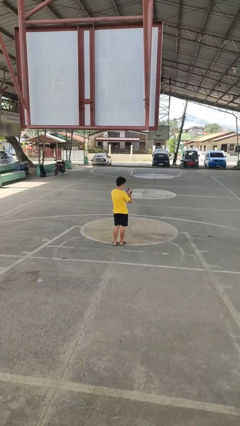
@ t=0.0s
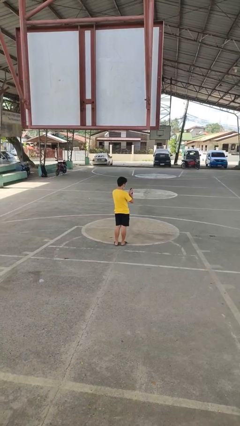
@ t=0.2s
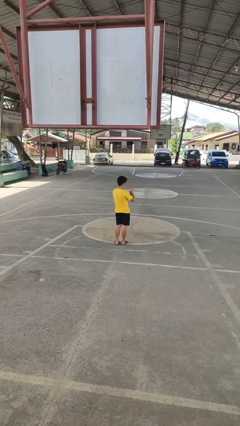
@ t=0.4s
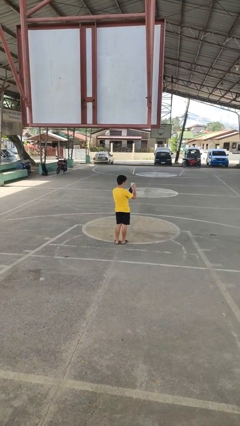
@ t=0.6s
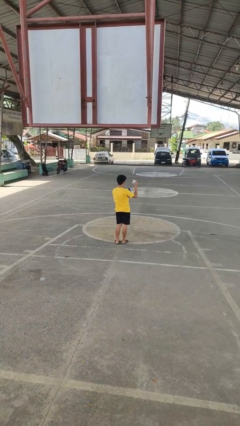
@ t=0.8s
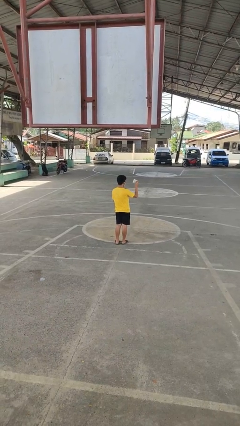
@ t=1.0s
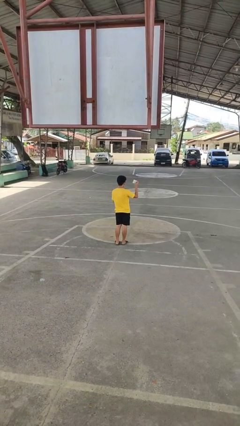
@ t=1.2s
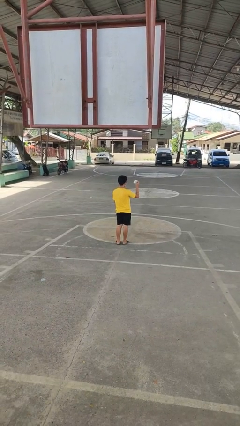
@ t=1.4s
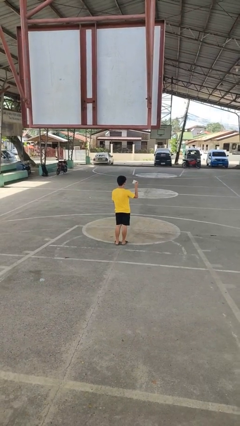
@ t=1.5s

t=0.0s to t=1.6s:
person takes object from purse

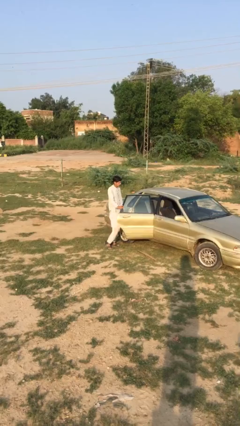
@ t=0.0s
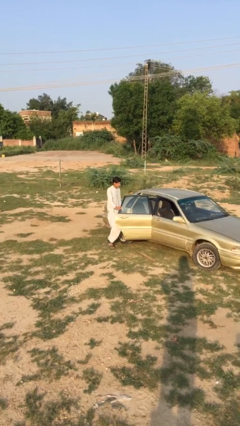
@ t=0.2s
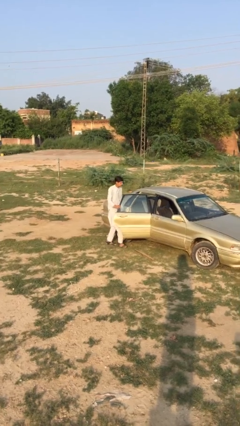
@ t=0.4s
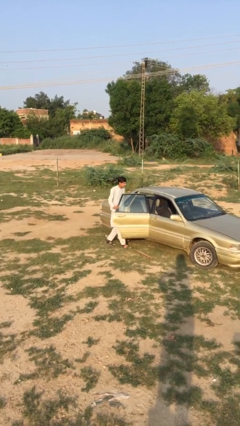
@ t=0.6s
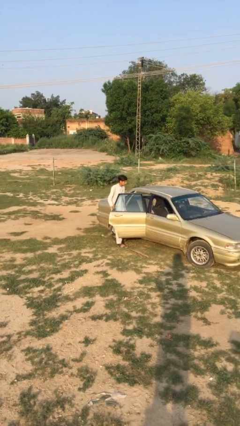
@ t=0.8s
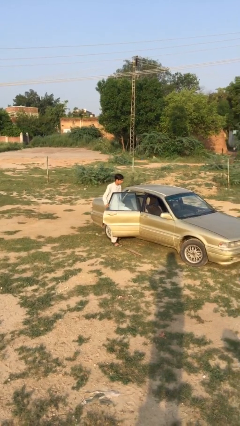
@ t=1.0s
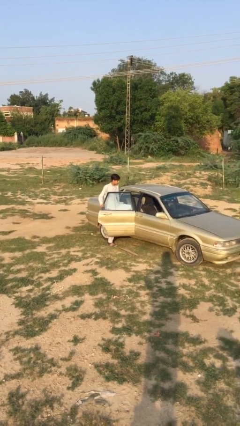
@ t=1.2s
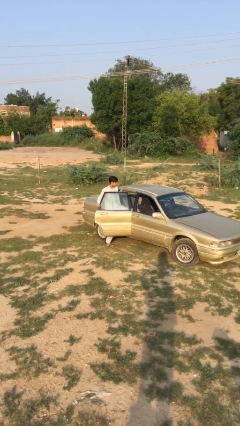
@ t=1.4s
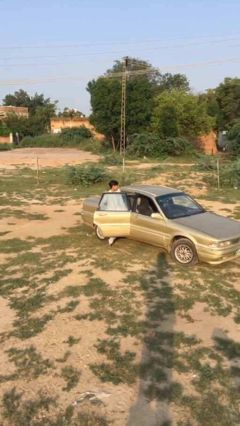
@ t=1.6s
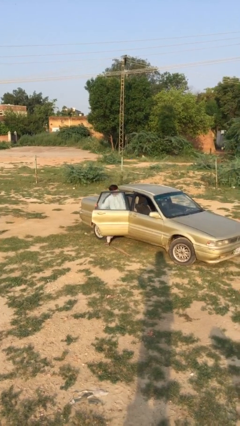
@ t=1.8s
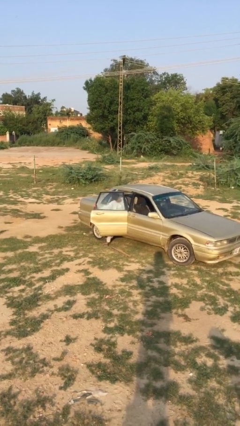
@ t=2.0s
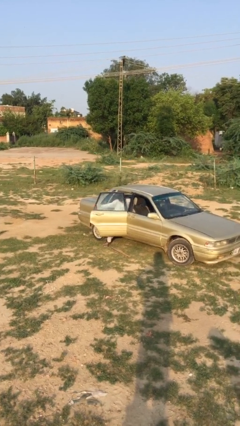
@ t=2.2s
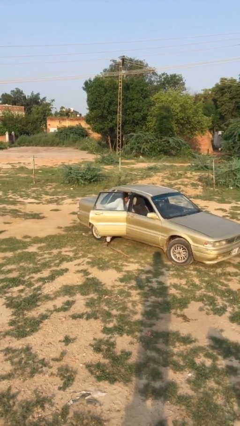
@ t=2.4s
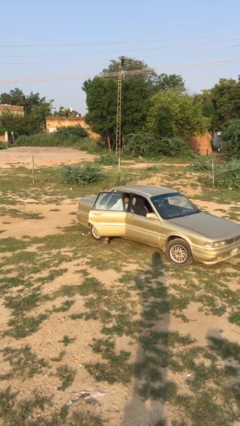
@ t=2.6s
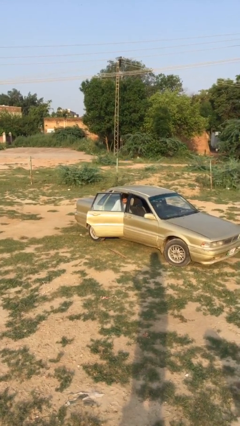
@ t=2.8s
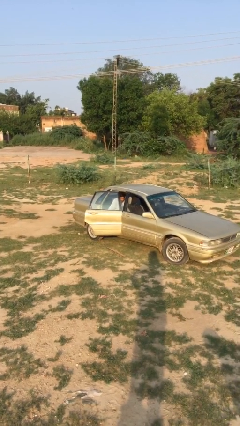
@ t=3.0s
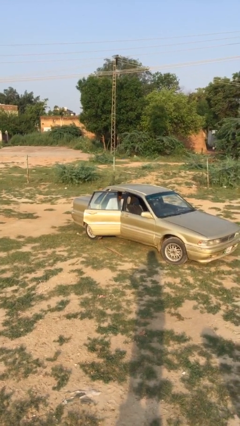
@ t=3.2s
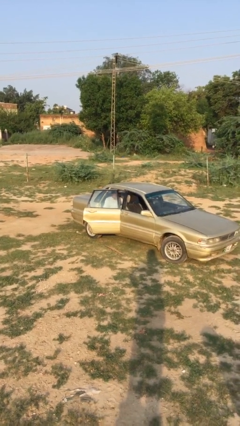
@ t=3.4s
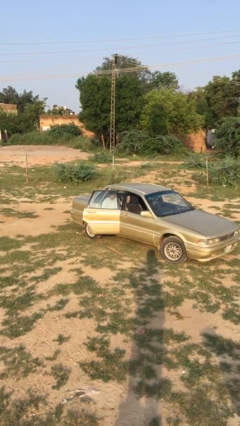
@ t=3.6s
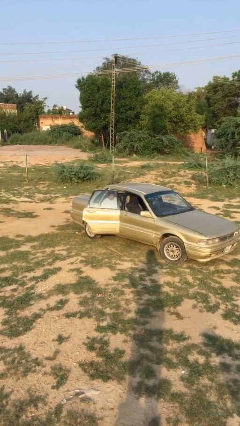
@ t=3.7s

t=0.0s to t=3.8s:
person enters car

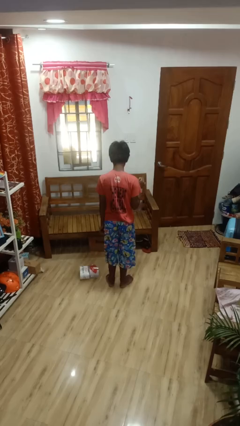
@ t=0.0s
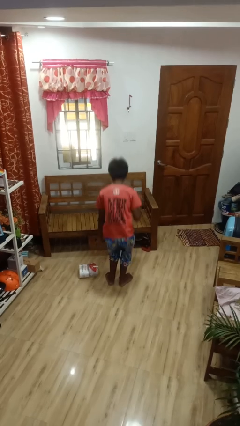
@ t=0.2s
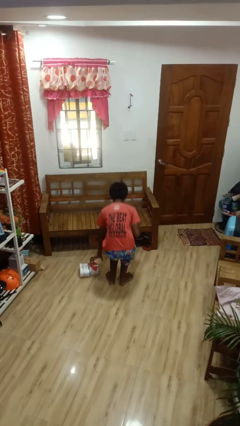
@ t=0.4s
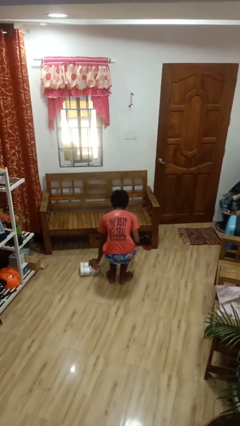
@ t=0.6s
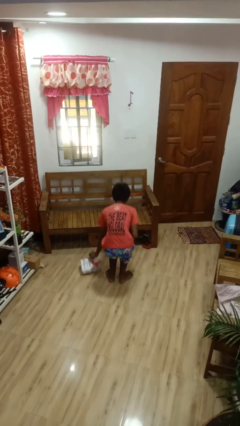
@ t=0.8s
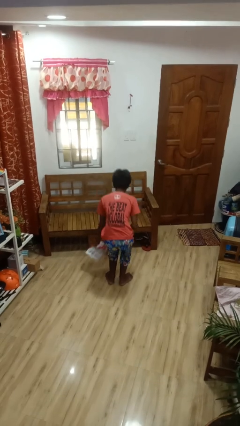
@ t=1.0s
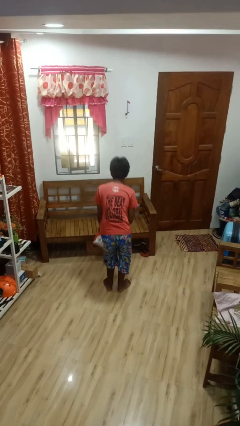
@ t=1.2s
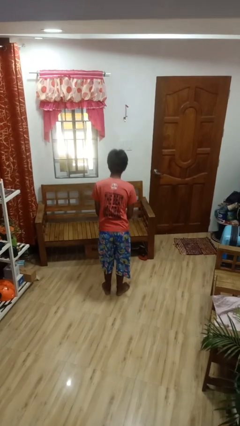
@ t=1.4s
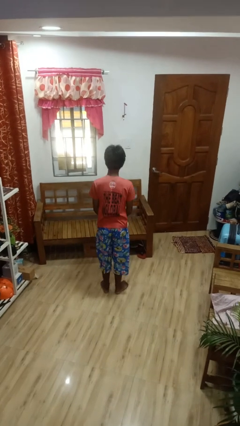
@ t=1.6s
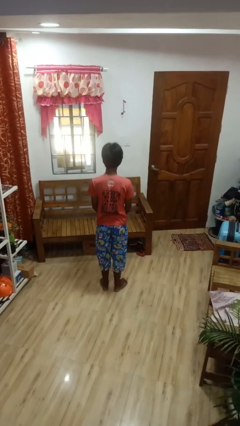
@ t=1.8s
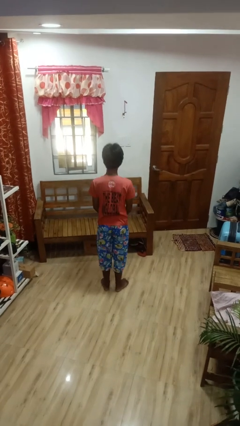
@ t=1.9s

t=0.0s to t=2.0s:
person picks up object from floor

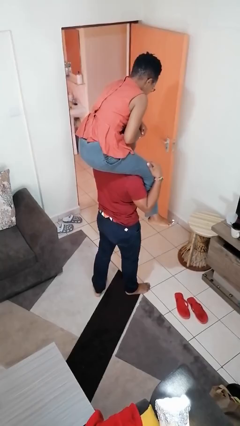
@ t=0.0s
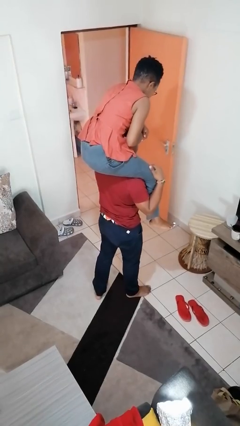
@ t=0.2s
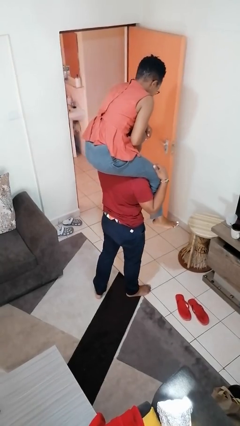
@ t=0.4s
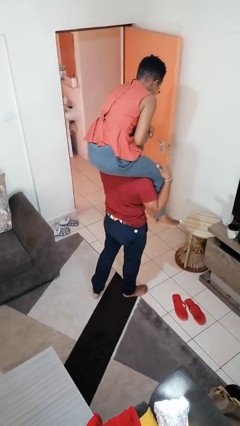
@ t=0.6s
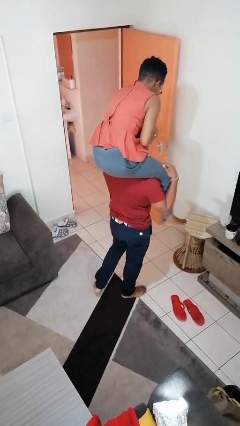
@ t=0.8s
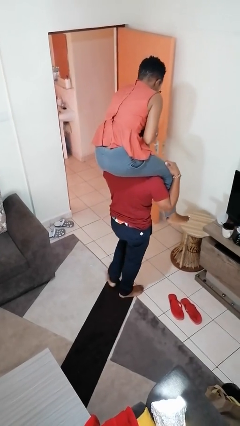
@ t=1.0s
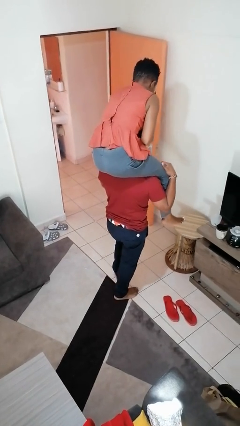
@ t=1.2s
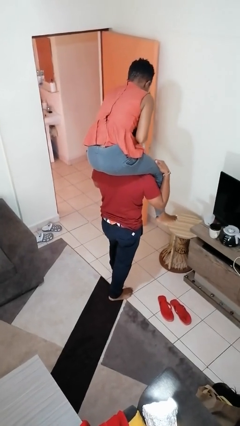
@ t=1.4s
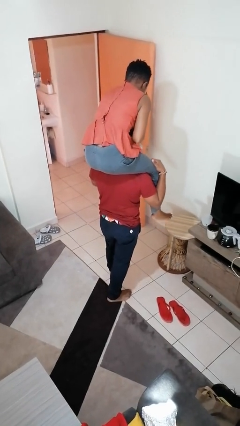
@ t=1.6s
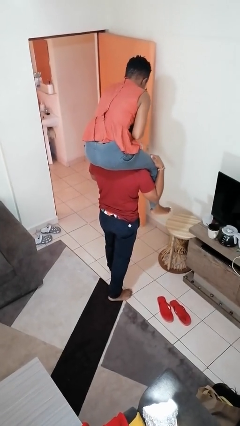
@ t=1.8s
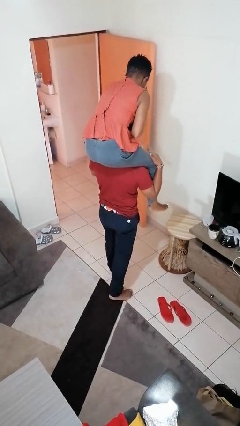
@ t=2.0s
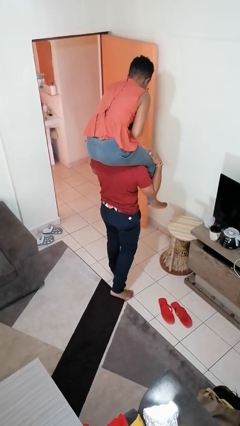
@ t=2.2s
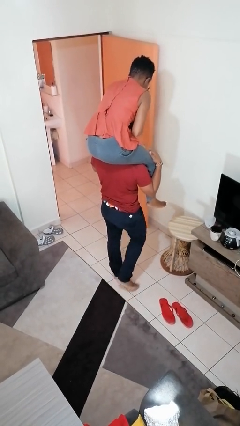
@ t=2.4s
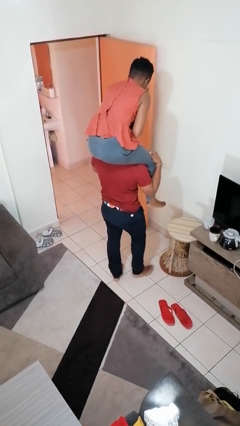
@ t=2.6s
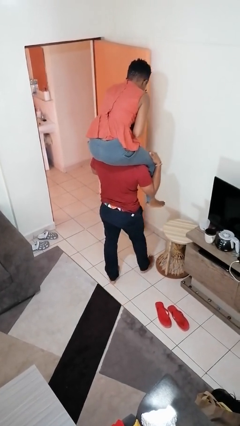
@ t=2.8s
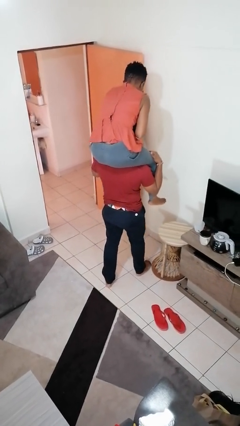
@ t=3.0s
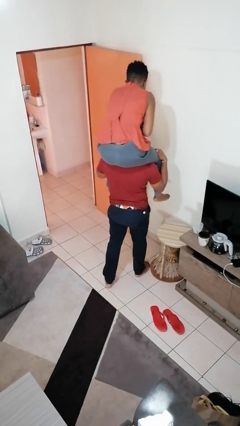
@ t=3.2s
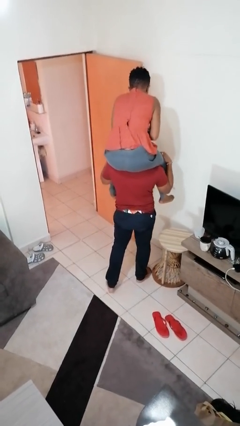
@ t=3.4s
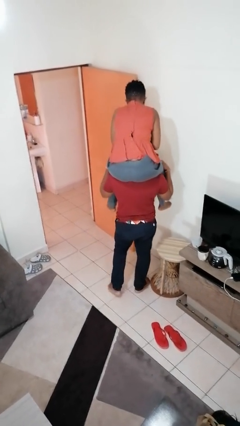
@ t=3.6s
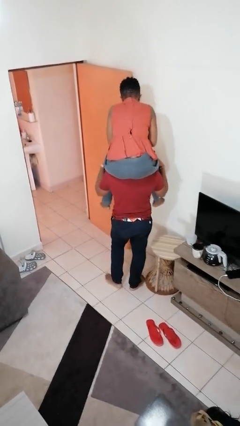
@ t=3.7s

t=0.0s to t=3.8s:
person carries person on shoulders

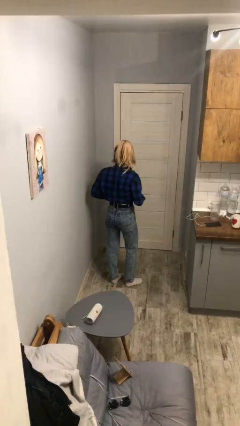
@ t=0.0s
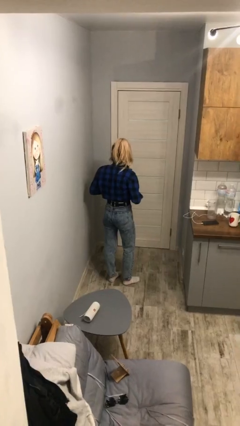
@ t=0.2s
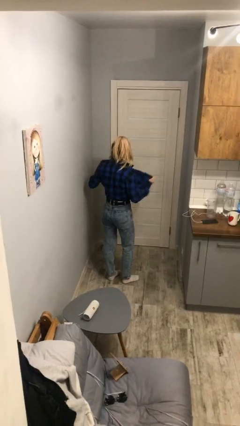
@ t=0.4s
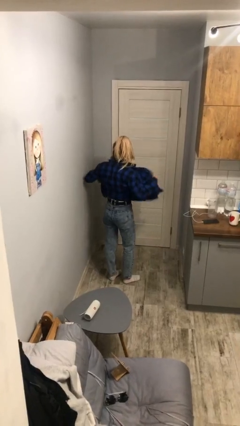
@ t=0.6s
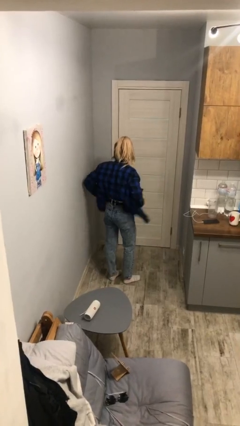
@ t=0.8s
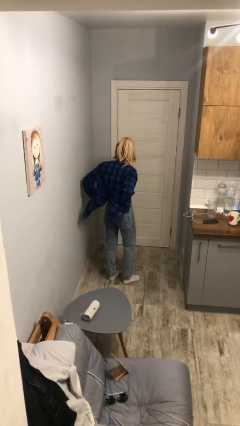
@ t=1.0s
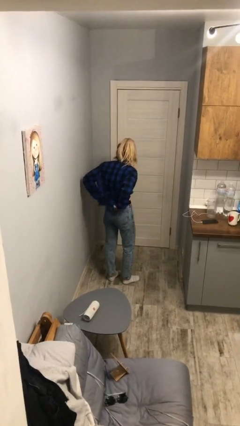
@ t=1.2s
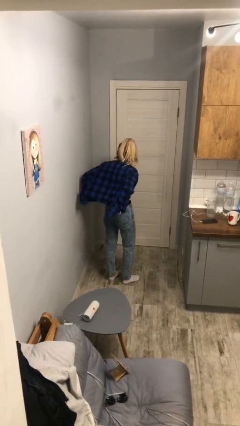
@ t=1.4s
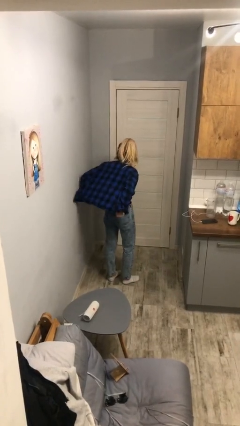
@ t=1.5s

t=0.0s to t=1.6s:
person untucks shirt

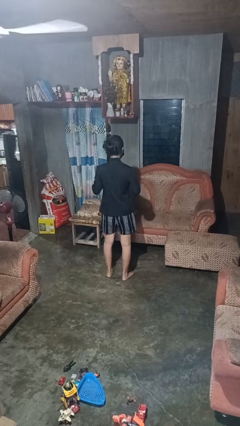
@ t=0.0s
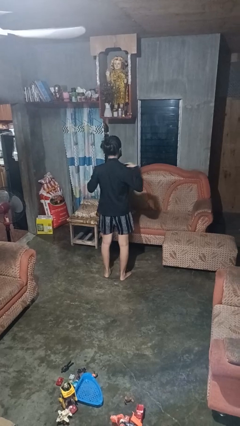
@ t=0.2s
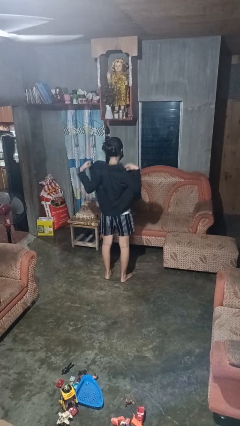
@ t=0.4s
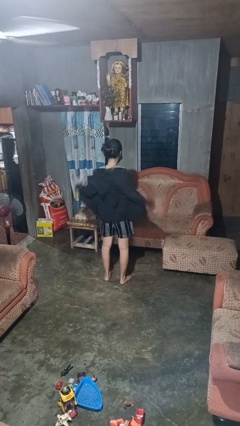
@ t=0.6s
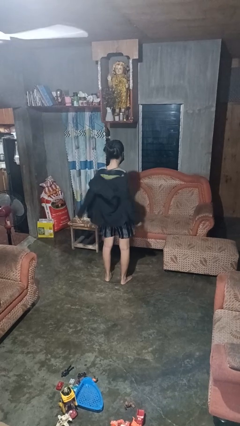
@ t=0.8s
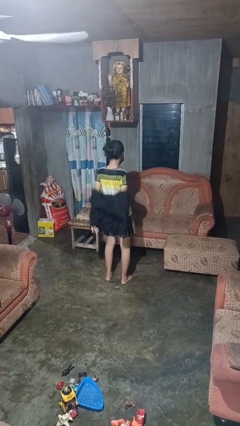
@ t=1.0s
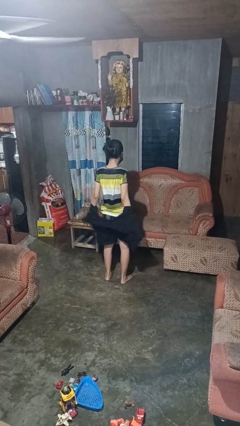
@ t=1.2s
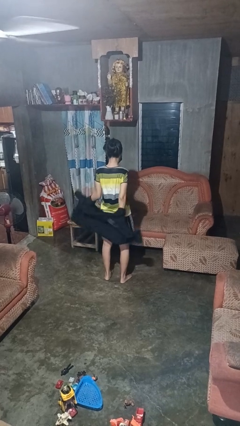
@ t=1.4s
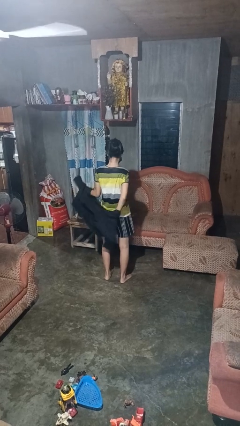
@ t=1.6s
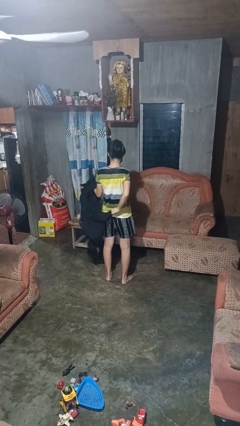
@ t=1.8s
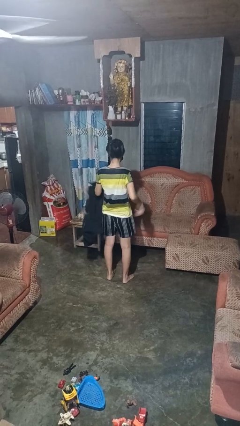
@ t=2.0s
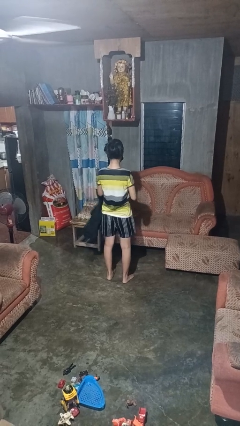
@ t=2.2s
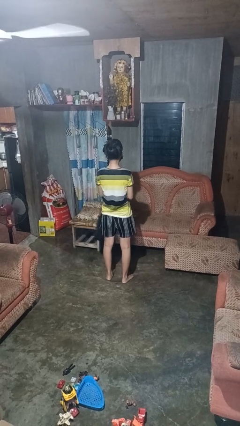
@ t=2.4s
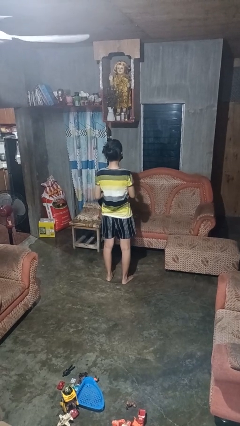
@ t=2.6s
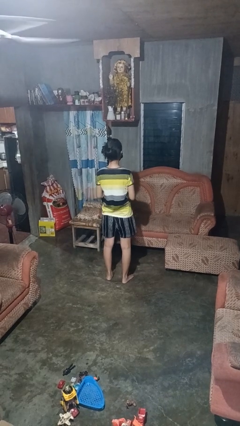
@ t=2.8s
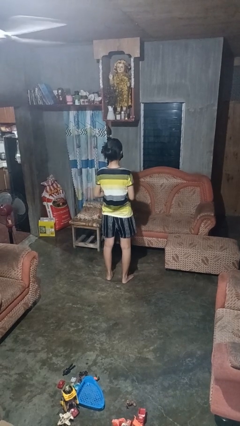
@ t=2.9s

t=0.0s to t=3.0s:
person takes off shirt

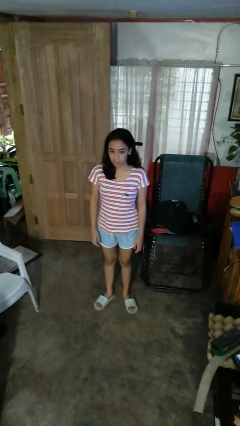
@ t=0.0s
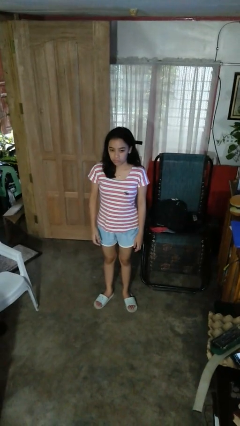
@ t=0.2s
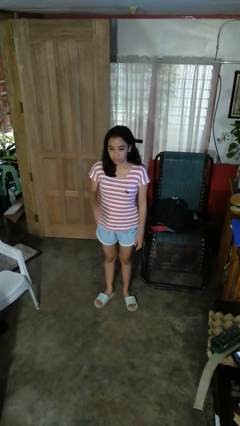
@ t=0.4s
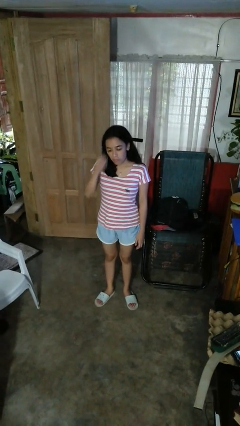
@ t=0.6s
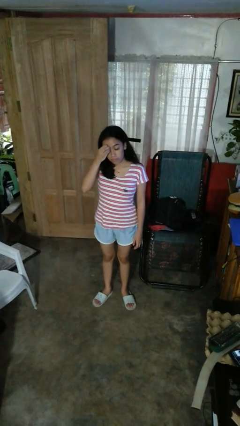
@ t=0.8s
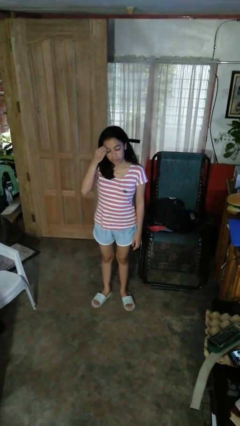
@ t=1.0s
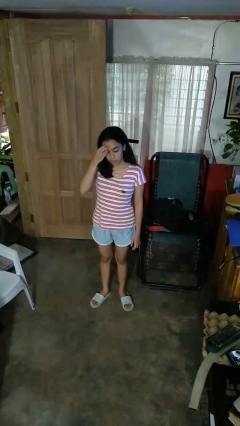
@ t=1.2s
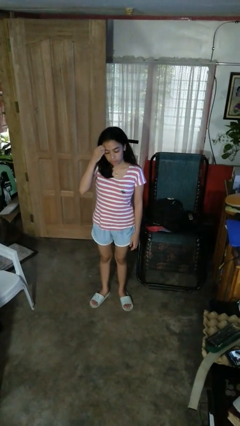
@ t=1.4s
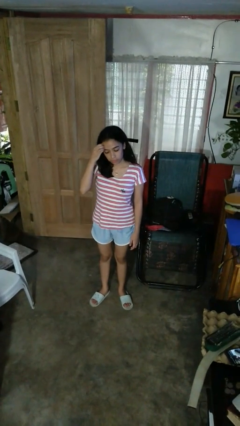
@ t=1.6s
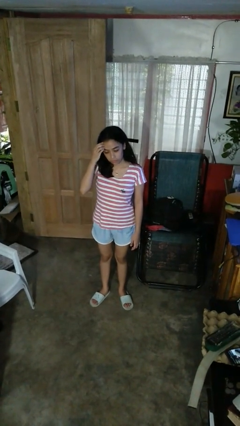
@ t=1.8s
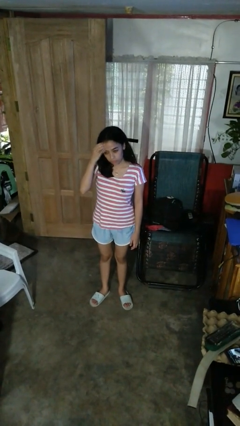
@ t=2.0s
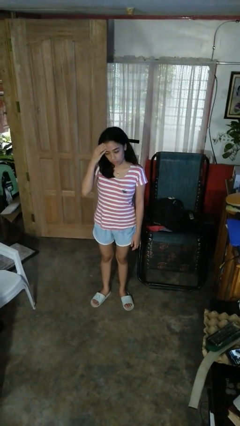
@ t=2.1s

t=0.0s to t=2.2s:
person scratches face
